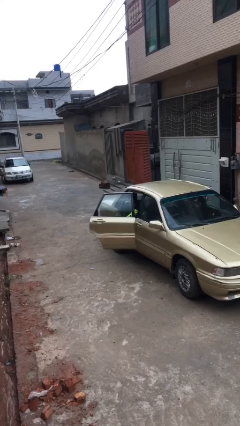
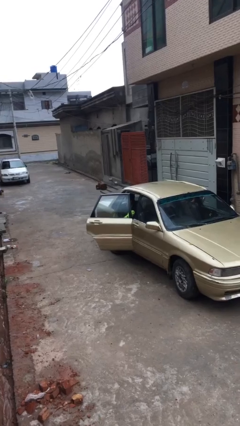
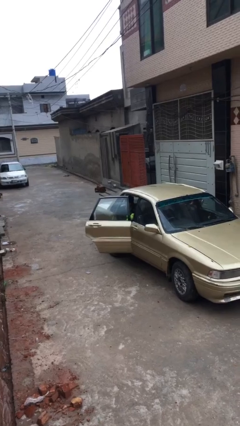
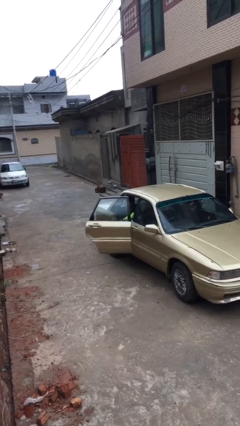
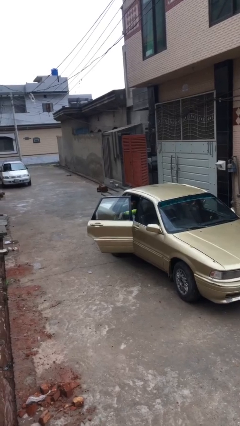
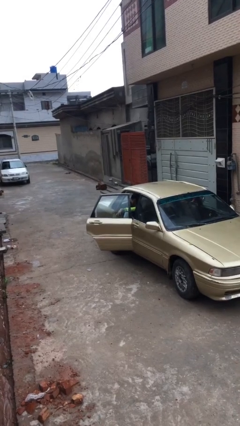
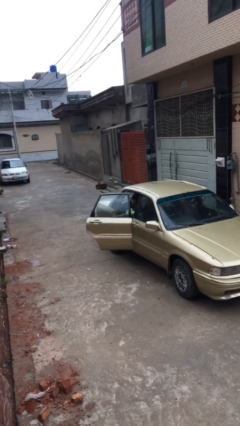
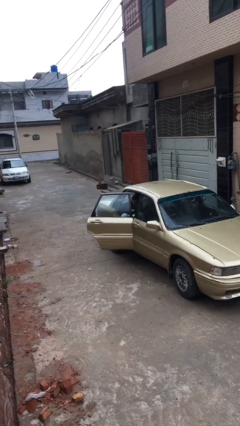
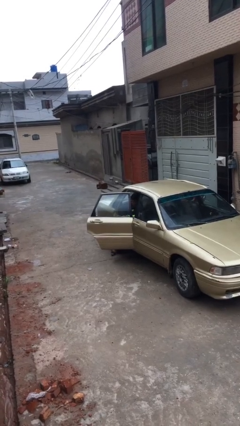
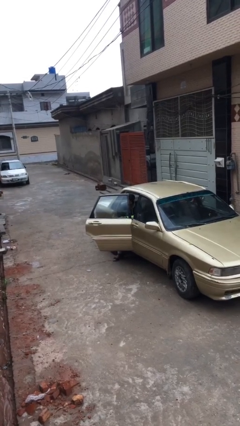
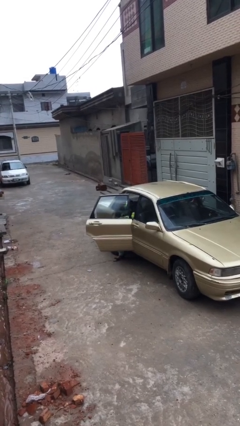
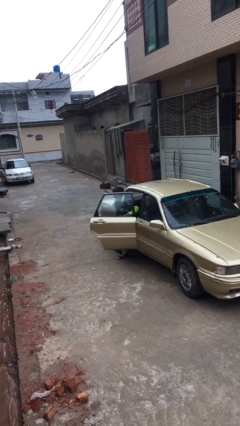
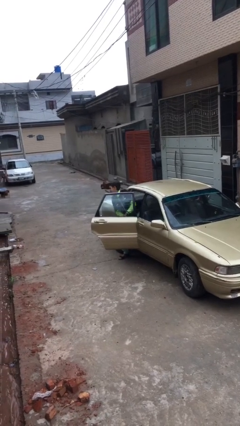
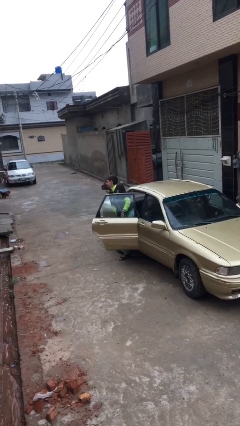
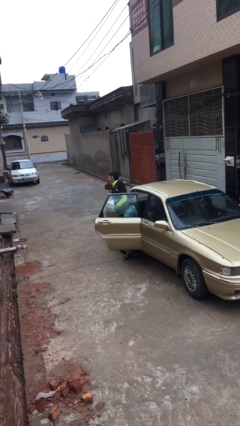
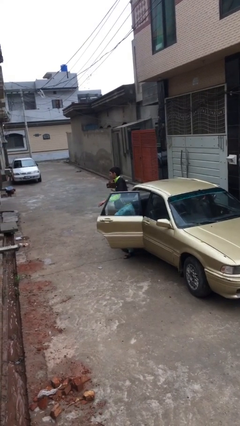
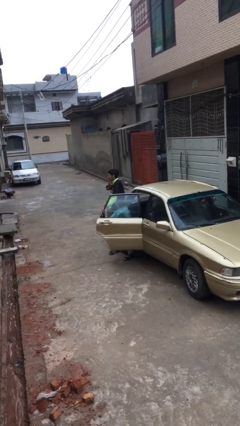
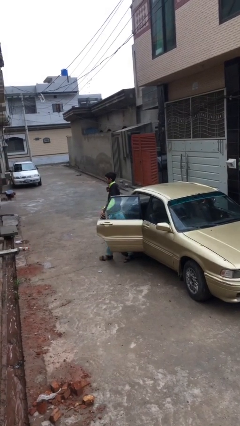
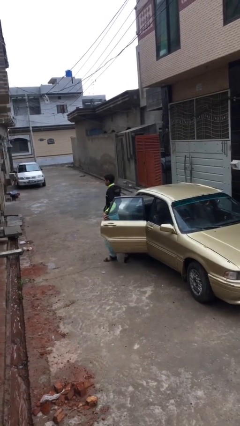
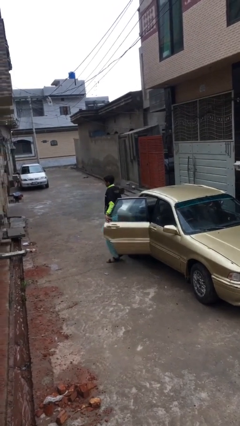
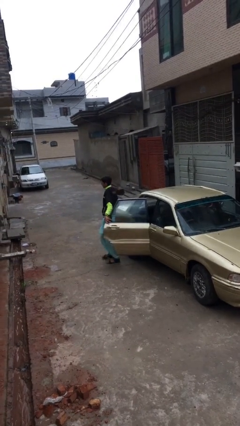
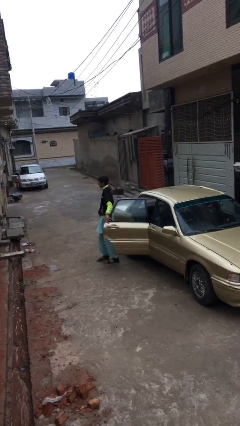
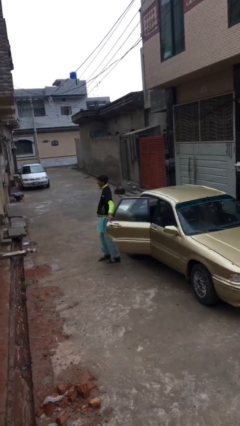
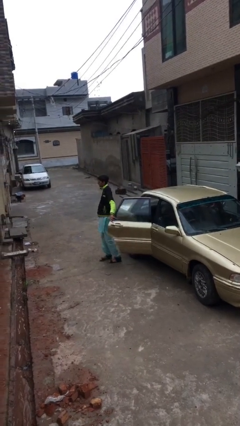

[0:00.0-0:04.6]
person exits car

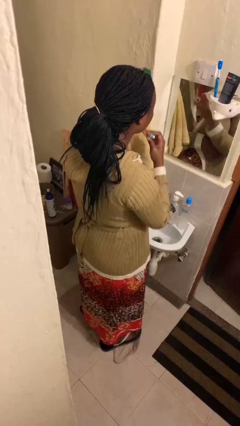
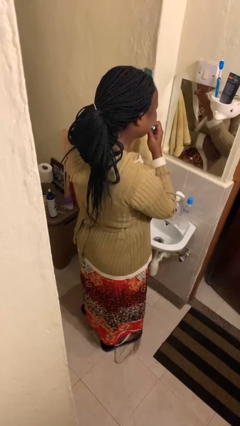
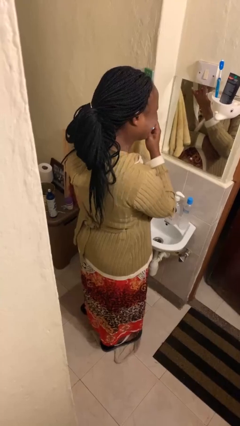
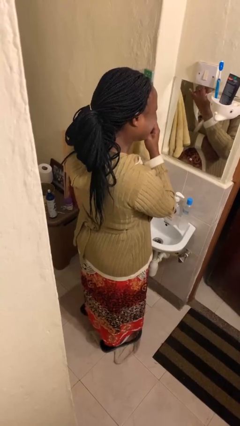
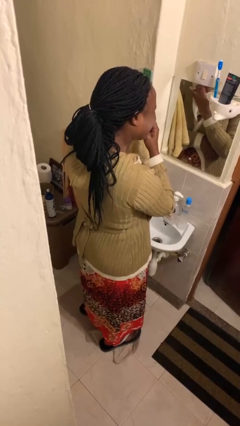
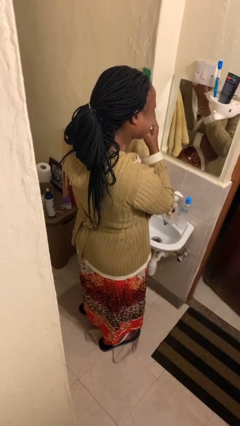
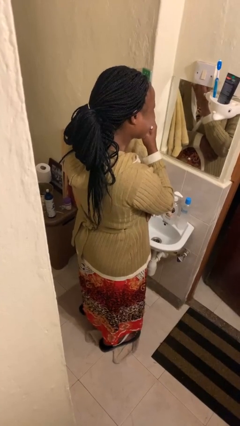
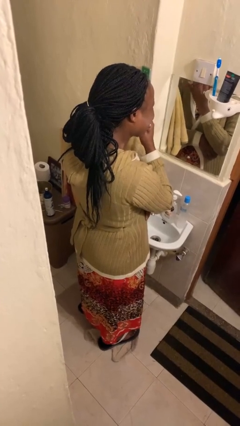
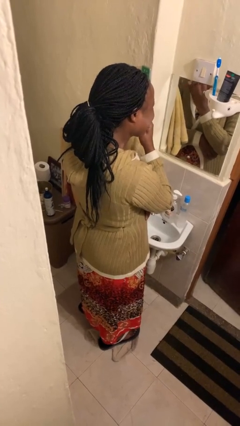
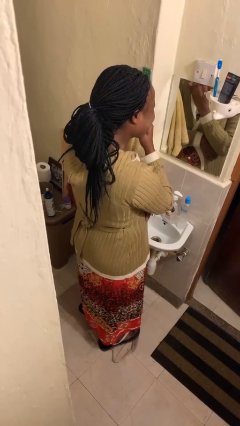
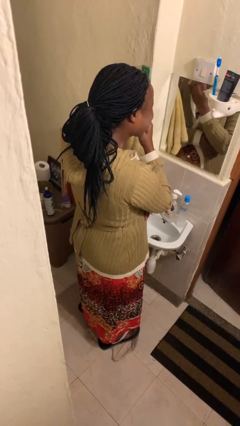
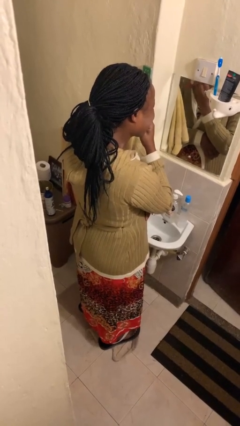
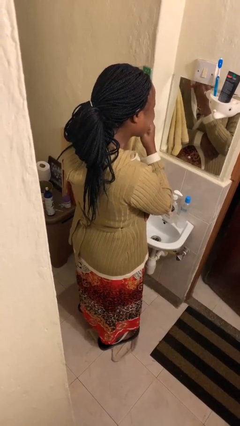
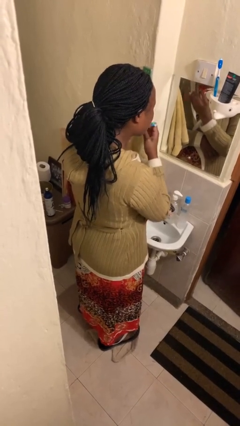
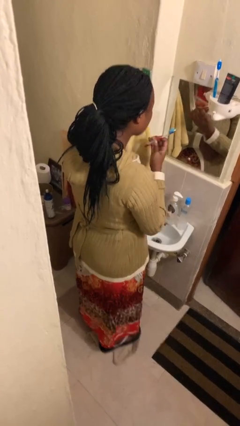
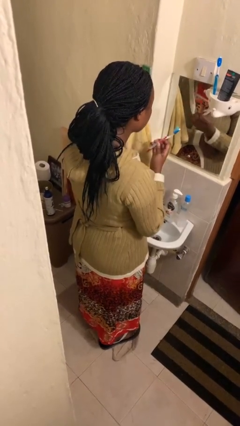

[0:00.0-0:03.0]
person brushes teeth

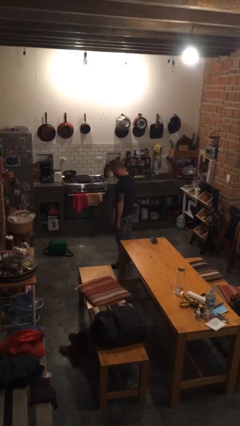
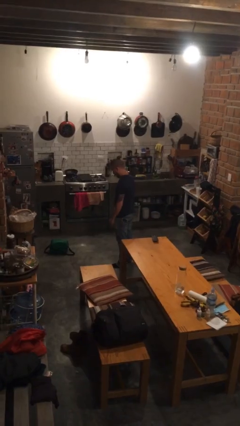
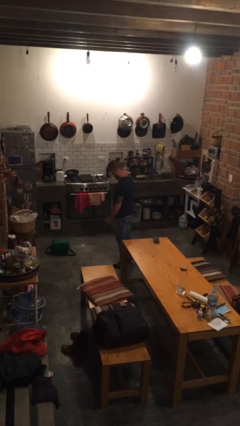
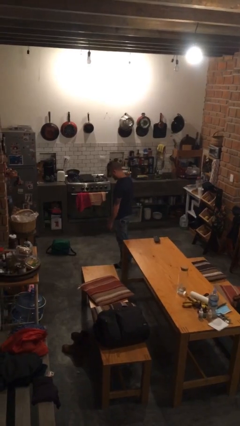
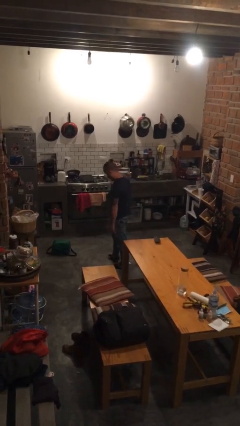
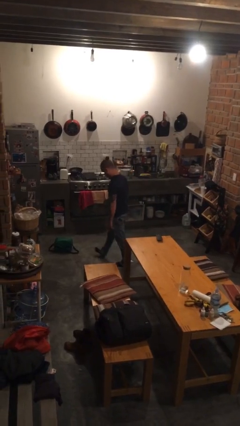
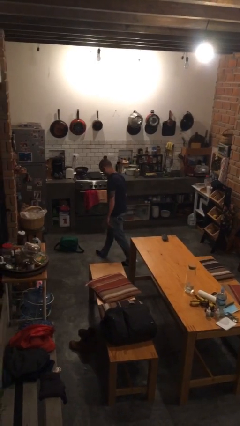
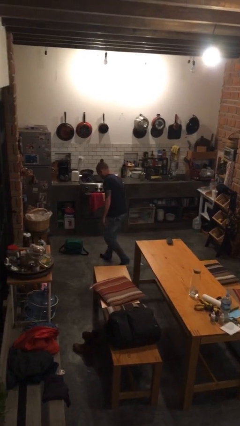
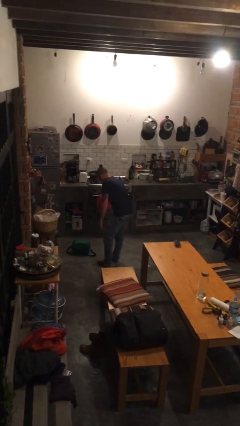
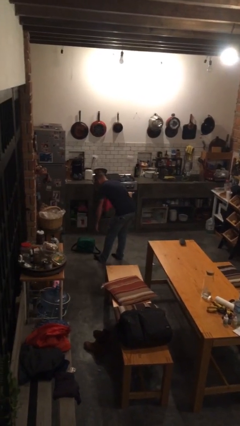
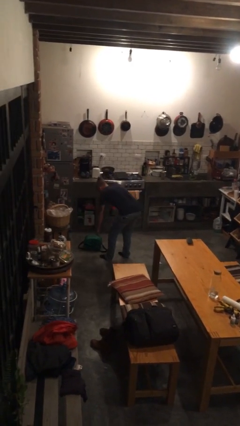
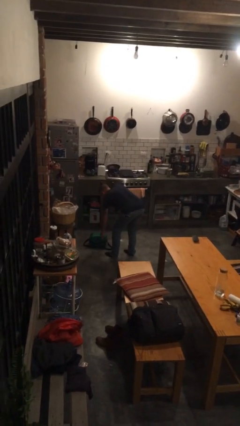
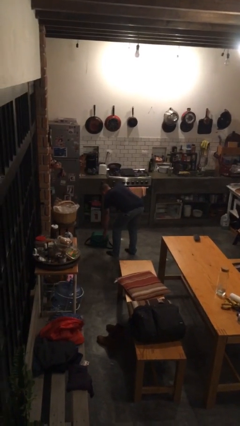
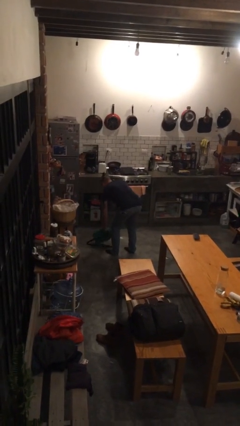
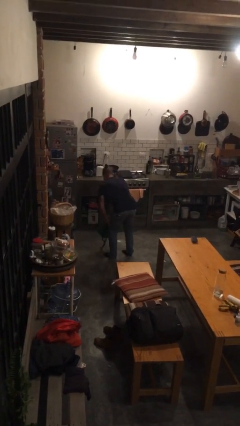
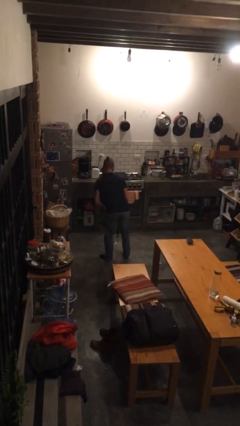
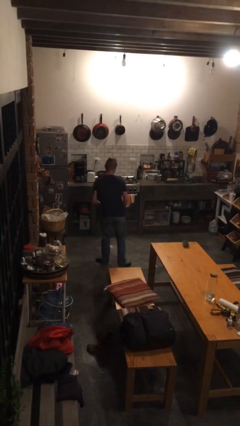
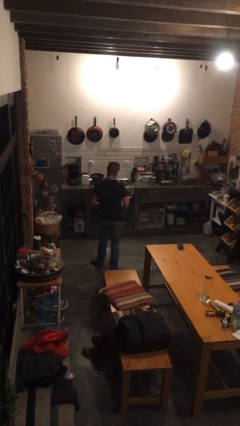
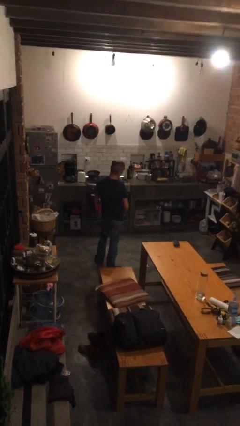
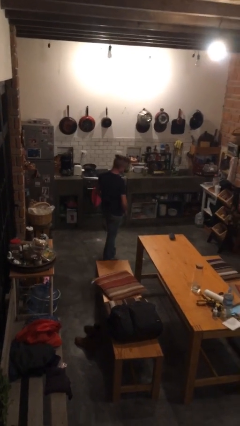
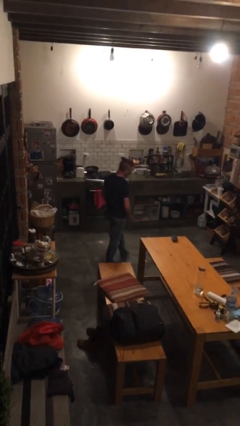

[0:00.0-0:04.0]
person picks up object from floor

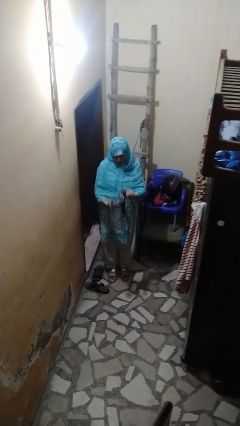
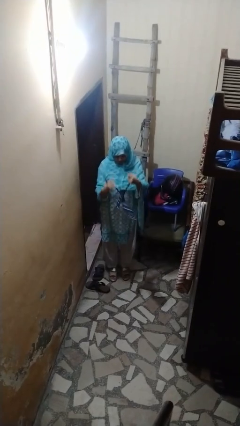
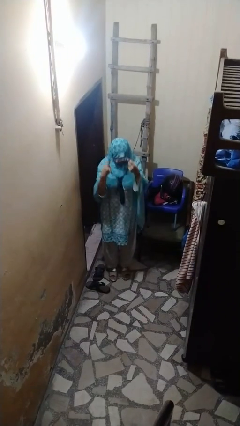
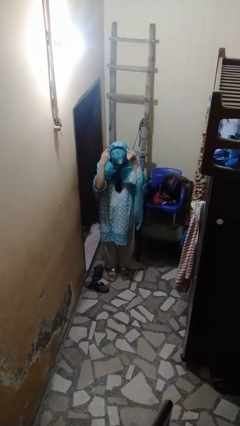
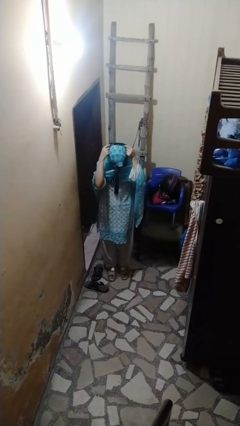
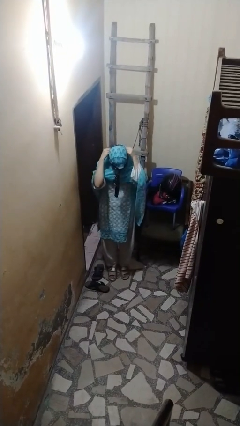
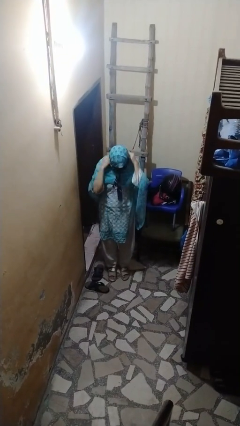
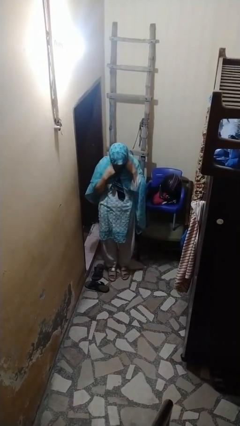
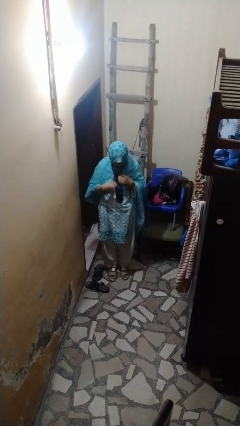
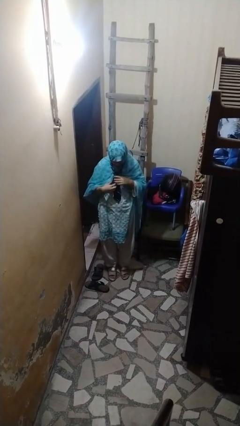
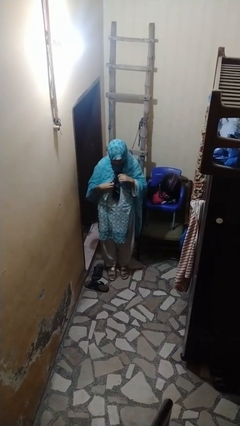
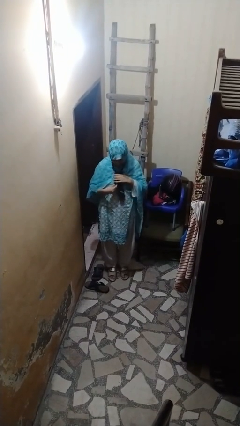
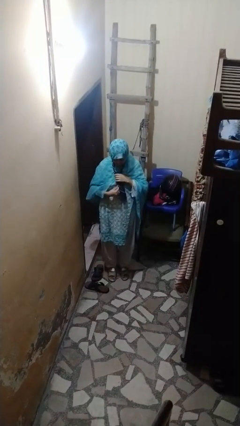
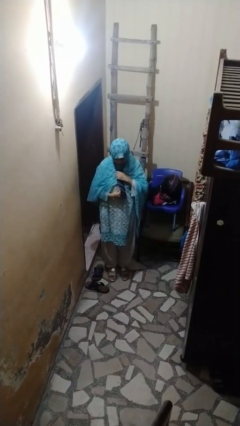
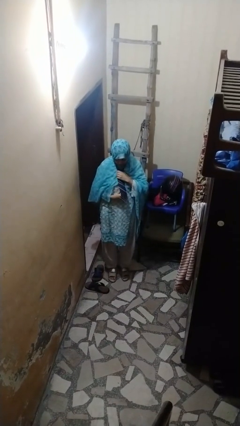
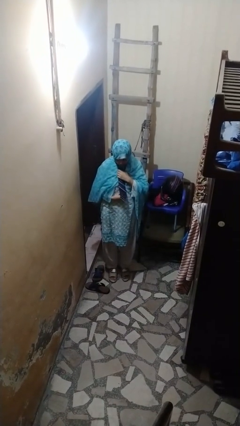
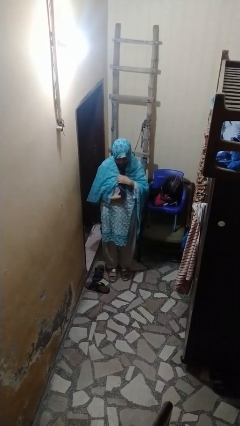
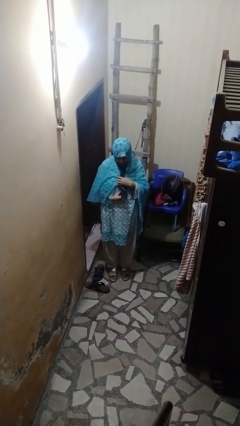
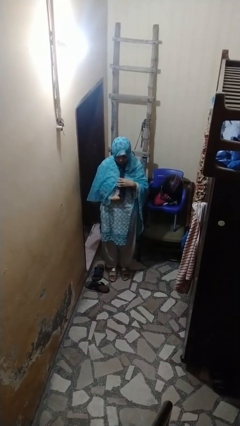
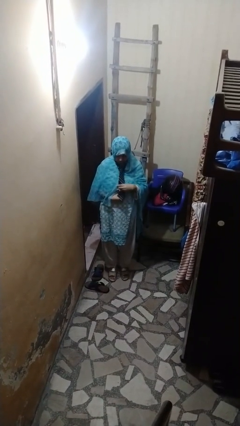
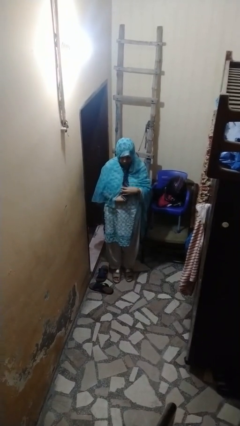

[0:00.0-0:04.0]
person puts on necktie

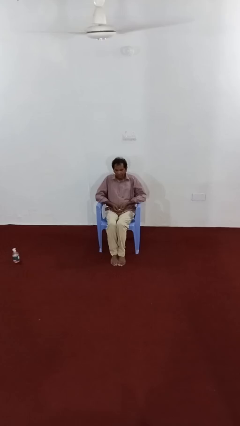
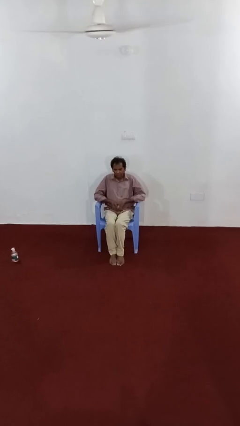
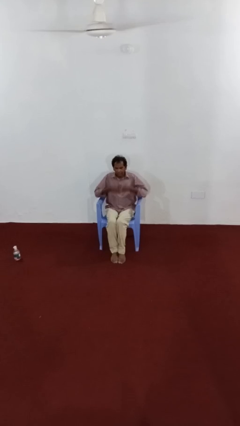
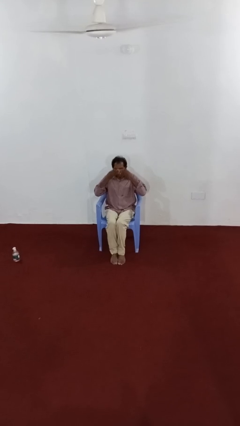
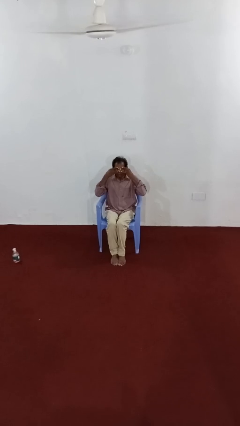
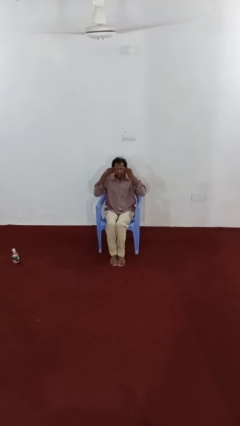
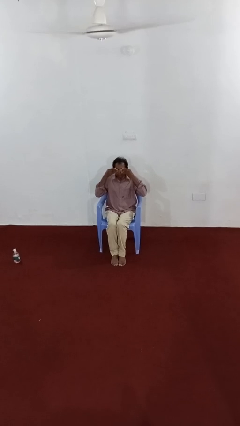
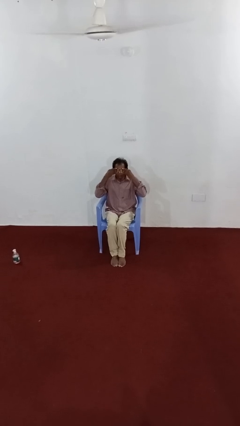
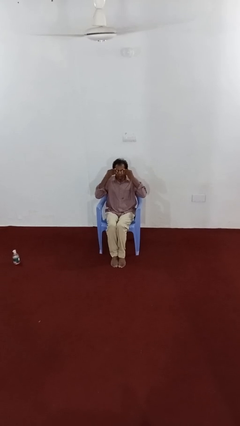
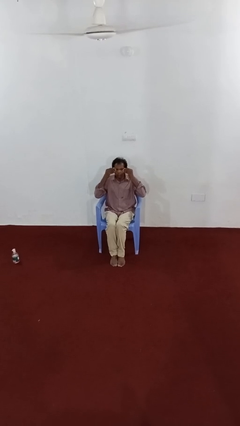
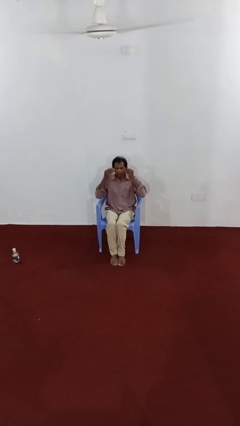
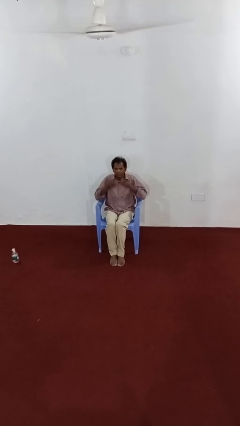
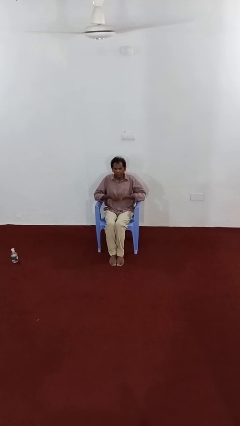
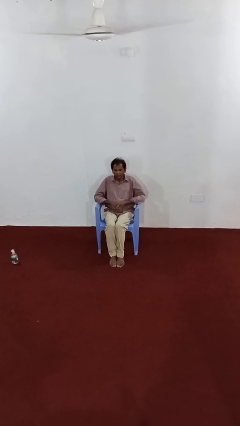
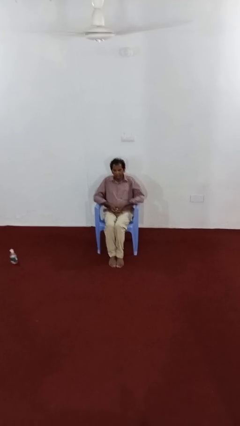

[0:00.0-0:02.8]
person rubs eyes
